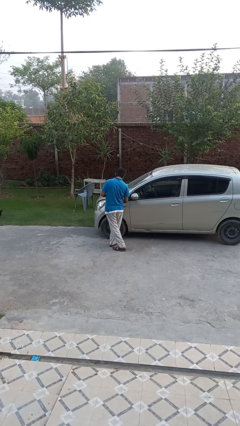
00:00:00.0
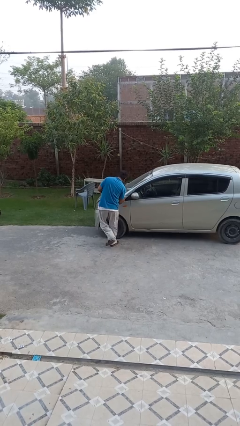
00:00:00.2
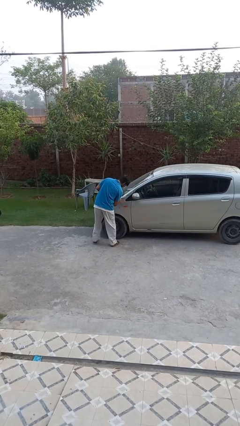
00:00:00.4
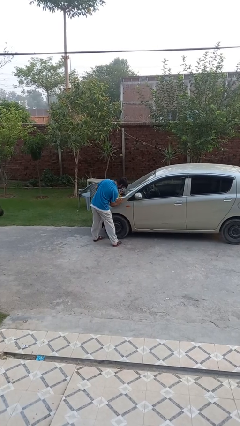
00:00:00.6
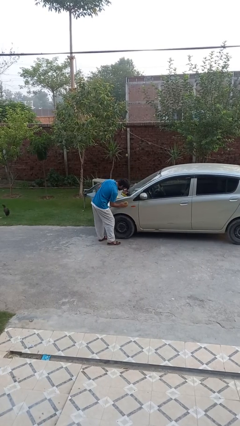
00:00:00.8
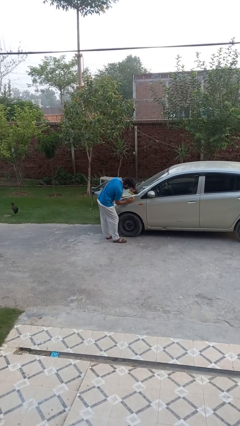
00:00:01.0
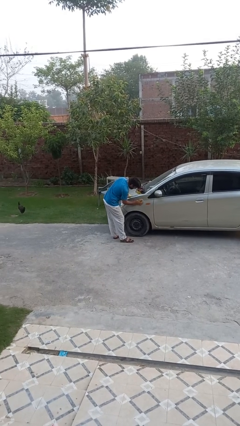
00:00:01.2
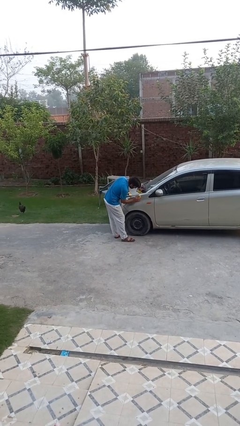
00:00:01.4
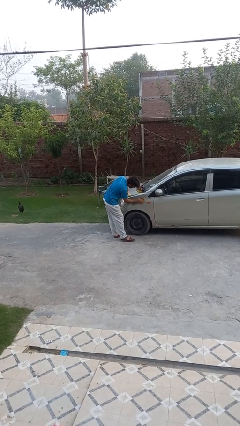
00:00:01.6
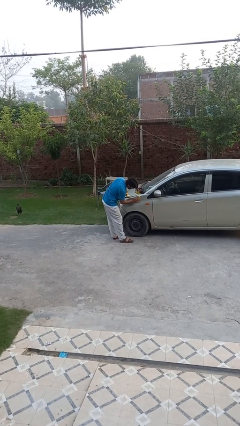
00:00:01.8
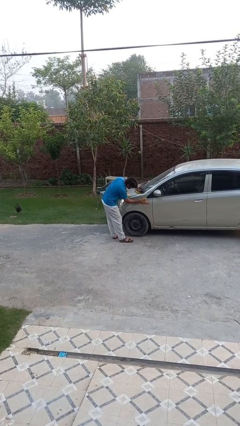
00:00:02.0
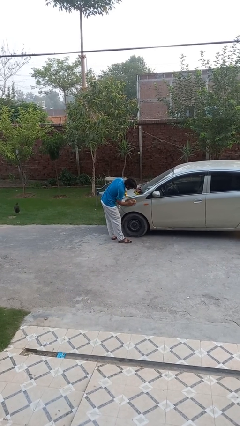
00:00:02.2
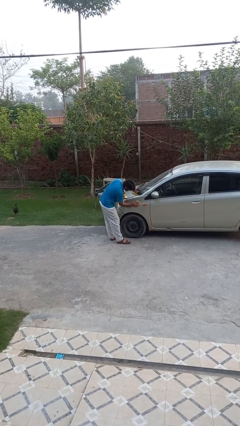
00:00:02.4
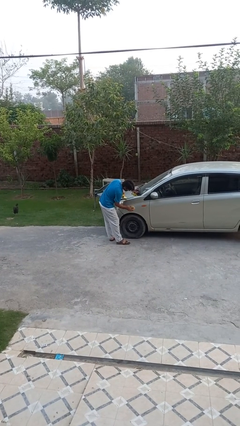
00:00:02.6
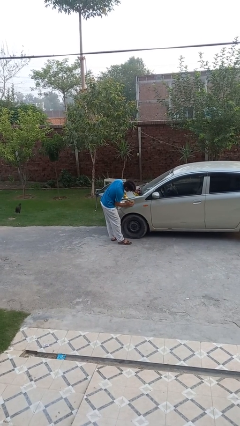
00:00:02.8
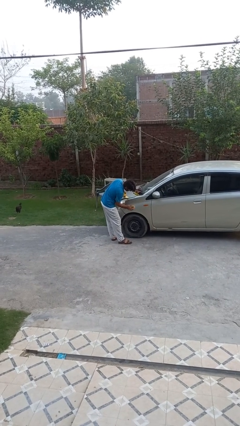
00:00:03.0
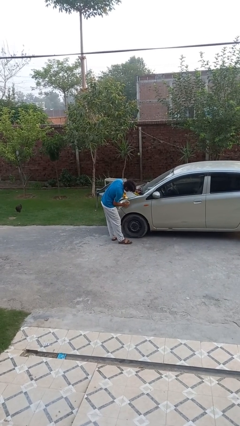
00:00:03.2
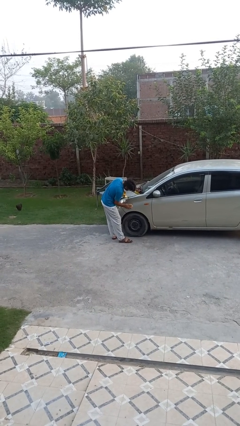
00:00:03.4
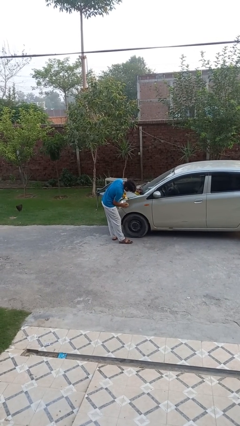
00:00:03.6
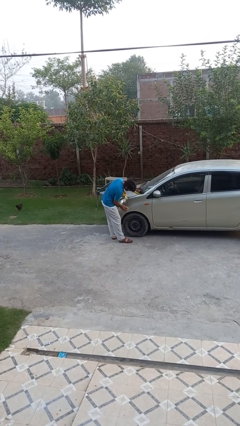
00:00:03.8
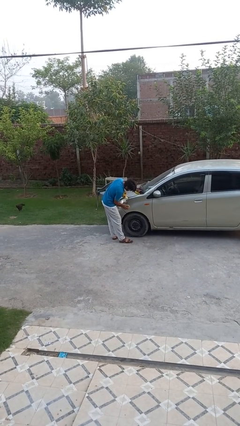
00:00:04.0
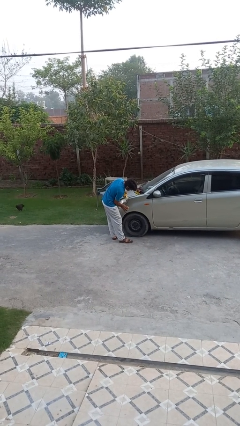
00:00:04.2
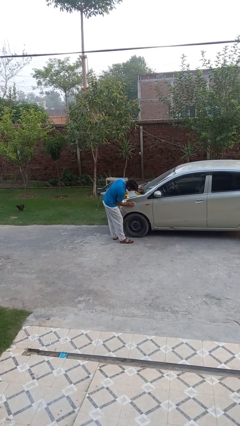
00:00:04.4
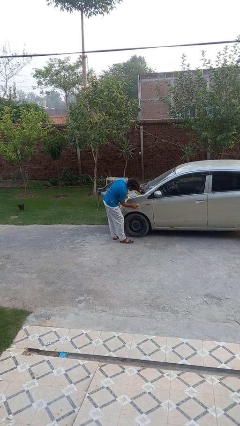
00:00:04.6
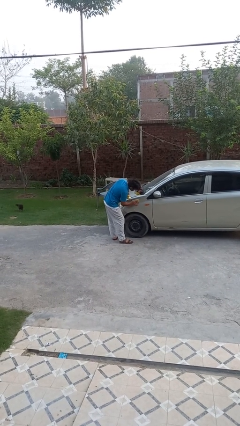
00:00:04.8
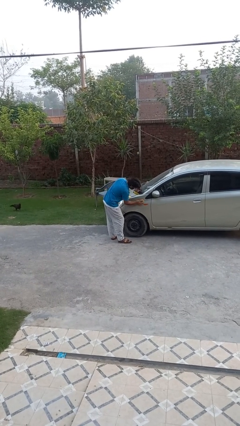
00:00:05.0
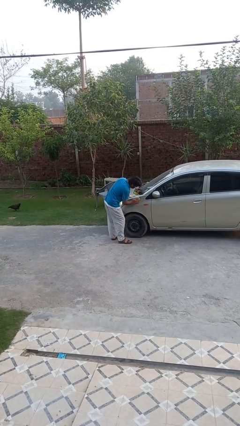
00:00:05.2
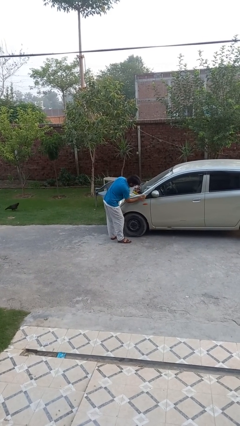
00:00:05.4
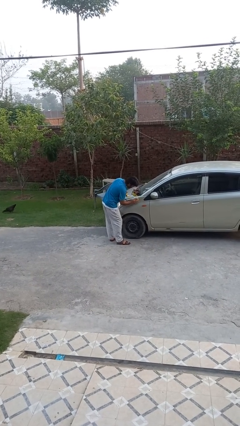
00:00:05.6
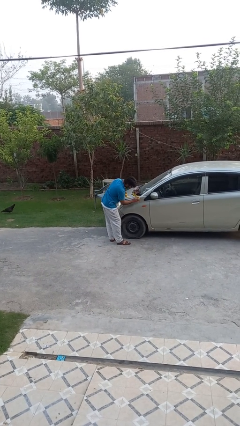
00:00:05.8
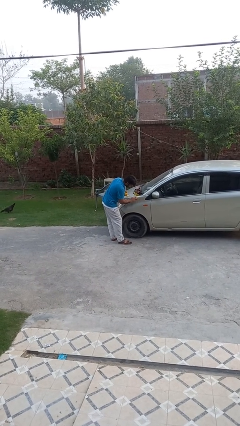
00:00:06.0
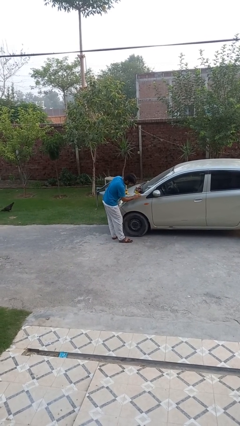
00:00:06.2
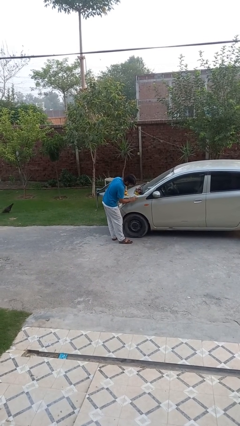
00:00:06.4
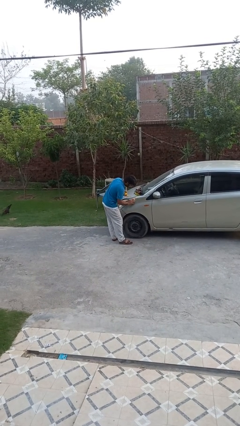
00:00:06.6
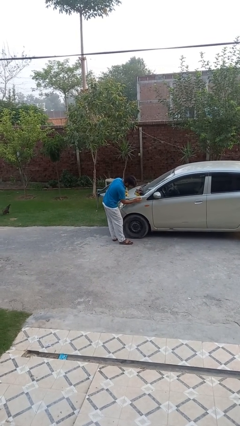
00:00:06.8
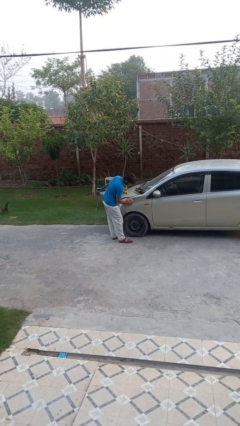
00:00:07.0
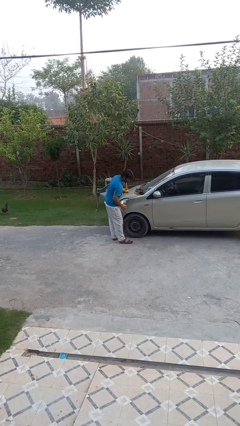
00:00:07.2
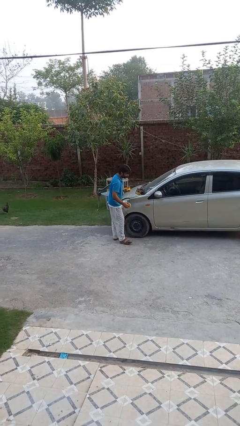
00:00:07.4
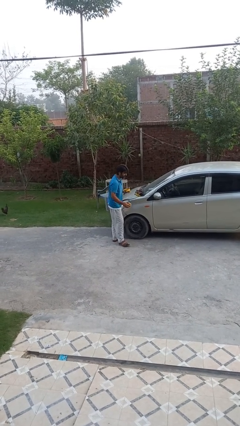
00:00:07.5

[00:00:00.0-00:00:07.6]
person polishes car with rag

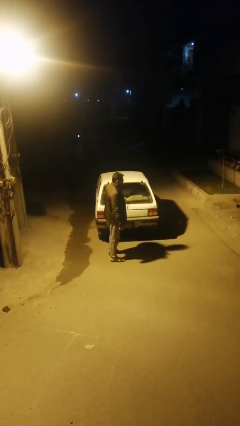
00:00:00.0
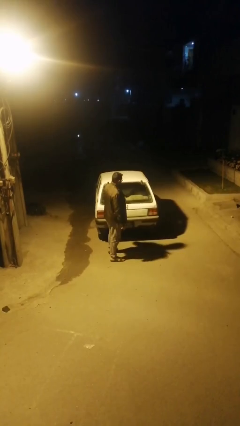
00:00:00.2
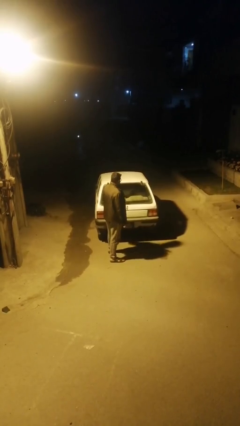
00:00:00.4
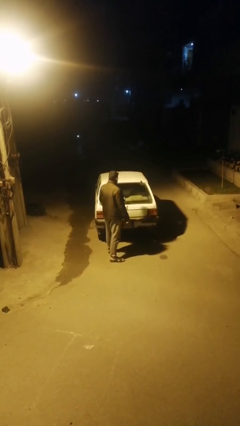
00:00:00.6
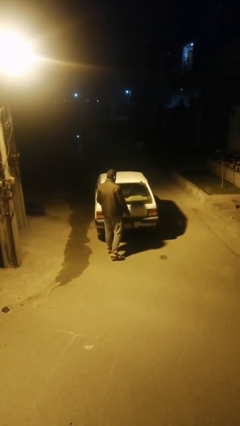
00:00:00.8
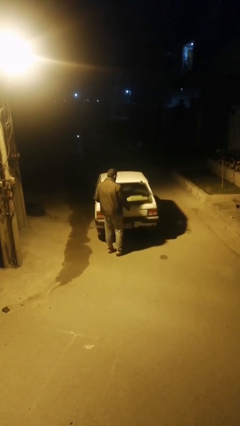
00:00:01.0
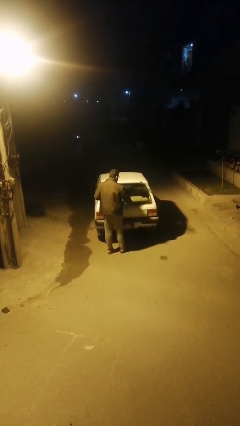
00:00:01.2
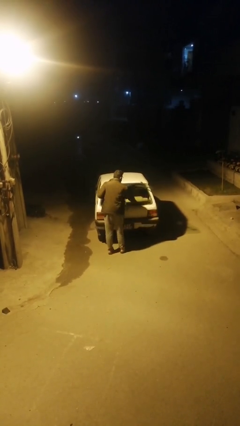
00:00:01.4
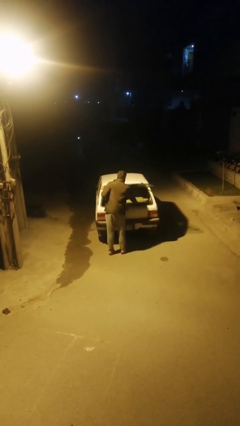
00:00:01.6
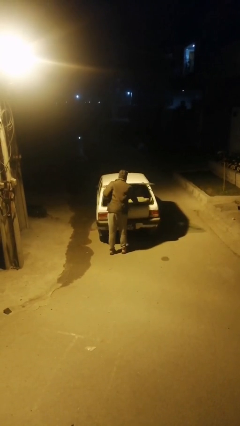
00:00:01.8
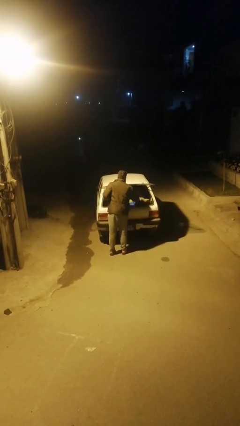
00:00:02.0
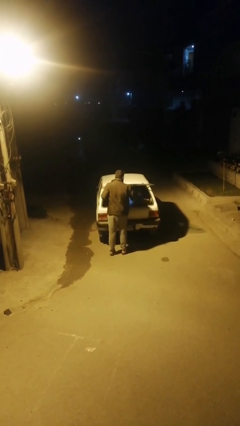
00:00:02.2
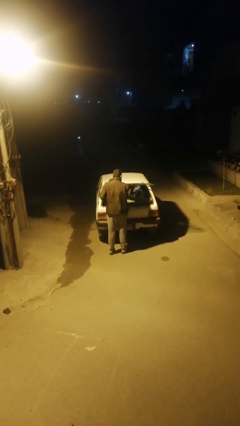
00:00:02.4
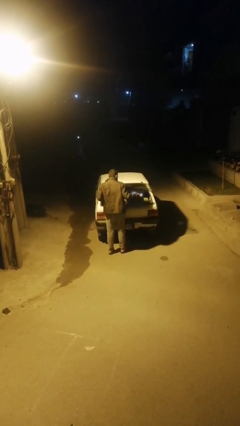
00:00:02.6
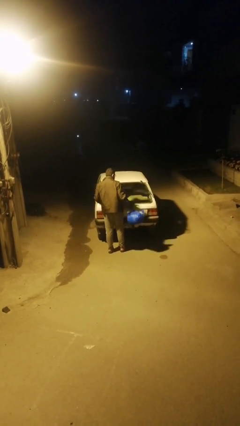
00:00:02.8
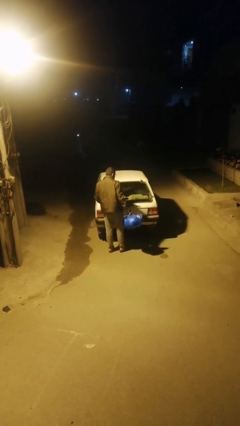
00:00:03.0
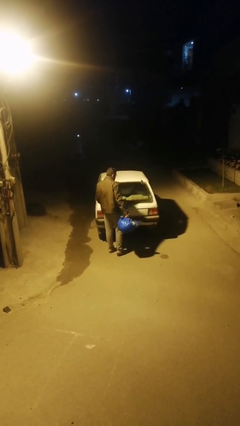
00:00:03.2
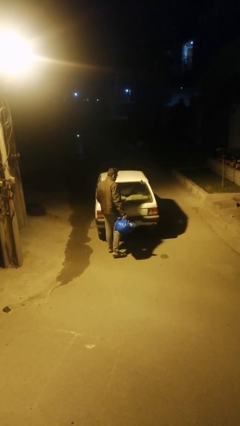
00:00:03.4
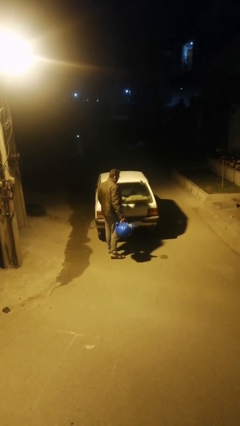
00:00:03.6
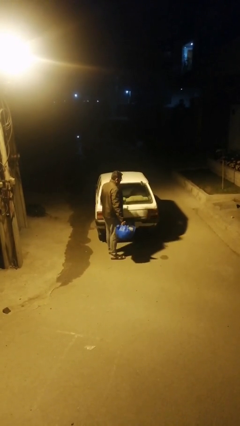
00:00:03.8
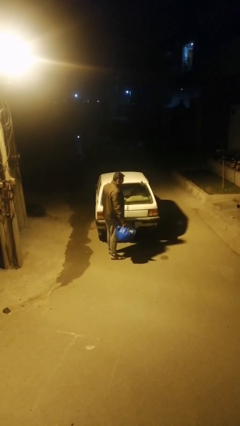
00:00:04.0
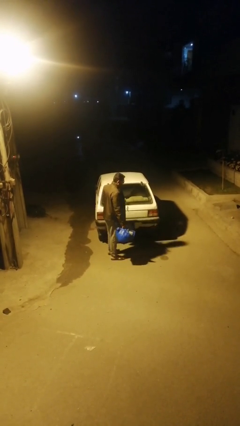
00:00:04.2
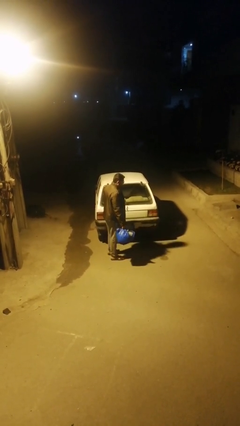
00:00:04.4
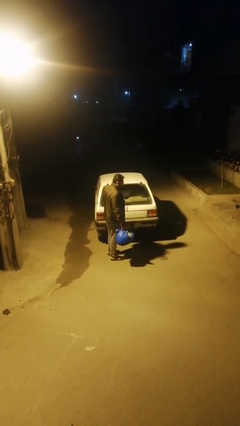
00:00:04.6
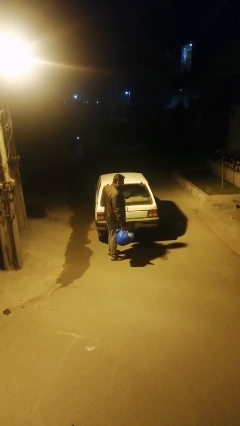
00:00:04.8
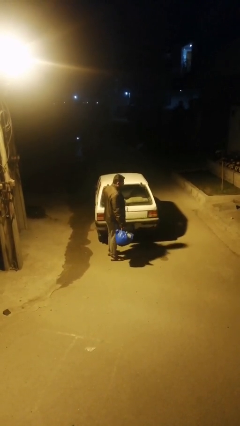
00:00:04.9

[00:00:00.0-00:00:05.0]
person unloads car

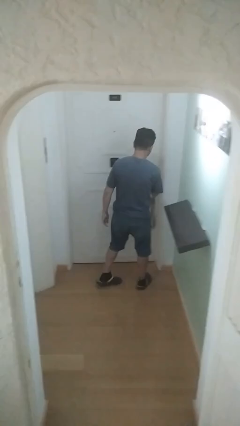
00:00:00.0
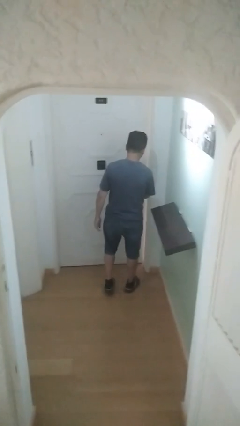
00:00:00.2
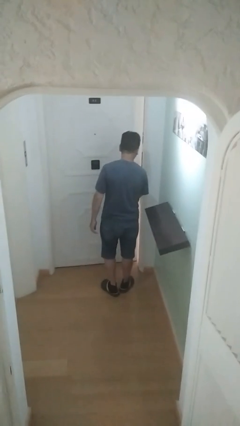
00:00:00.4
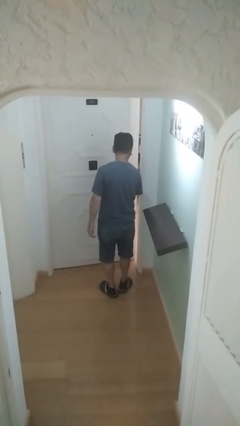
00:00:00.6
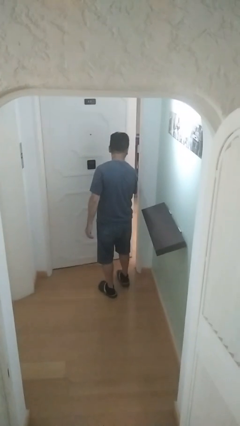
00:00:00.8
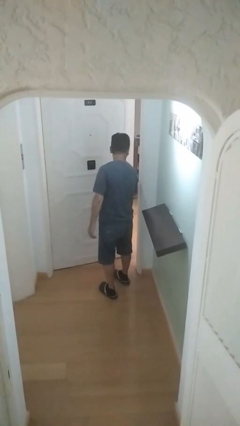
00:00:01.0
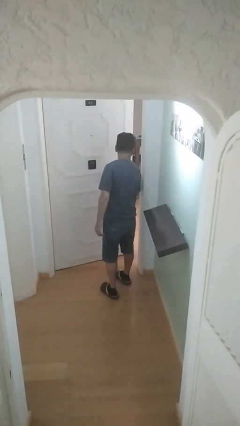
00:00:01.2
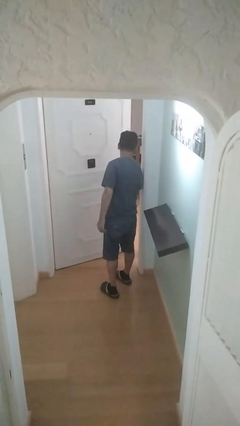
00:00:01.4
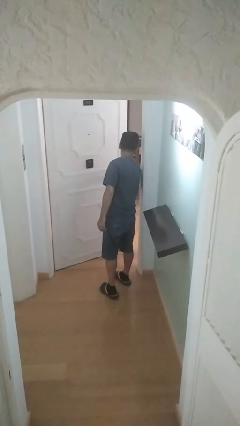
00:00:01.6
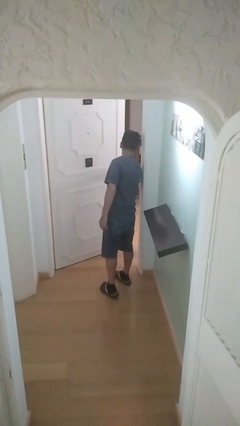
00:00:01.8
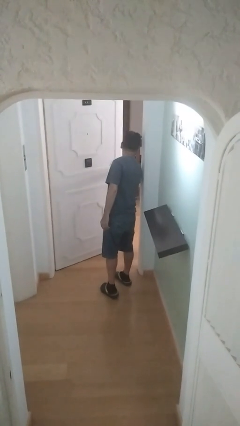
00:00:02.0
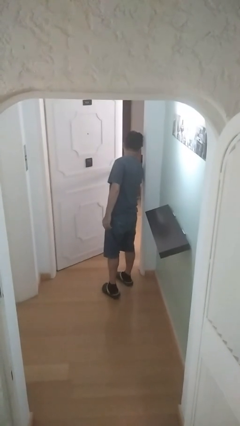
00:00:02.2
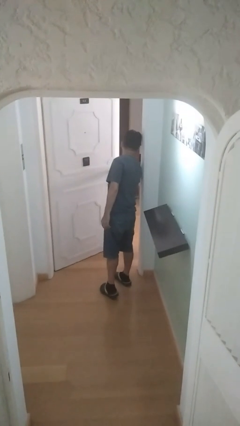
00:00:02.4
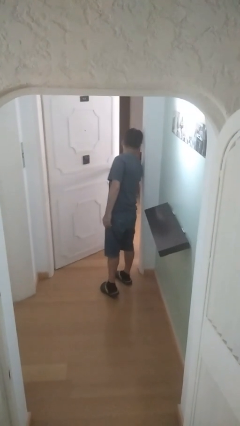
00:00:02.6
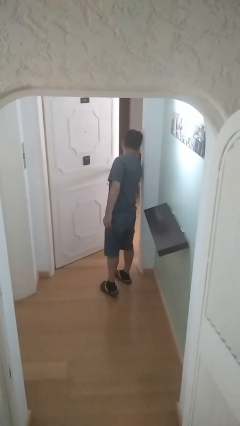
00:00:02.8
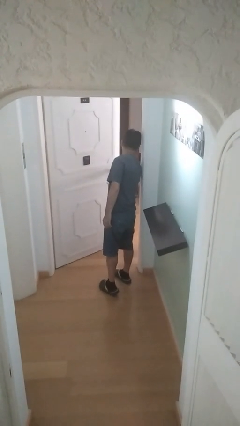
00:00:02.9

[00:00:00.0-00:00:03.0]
person opens facility door

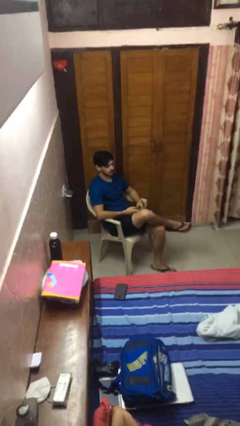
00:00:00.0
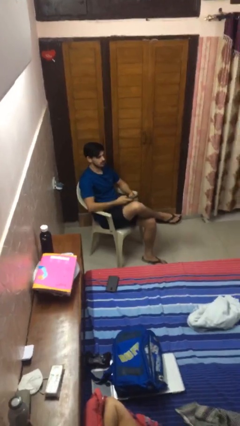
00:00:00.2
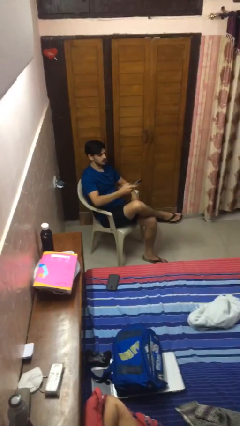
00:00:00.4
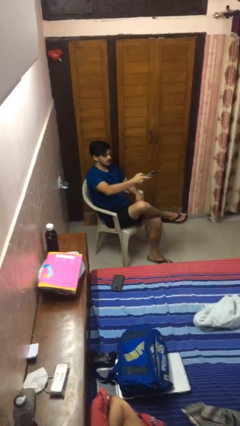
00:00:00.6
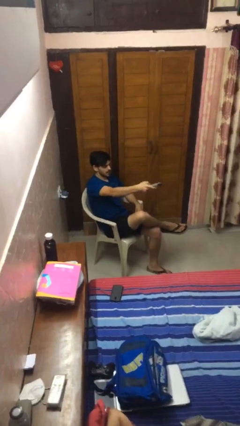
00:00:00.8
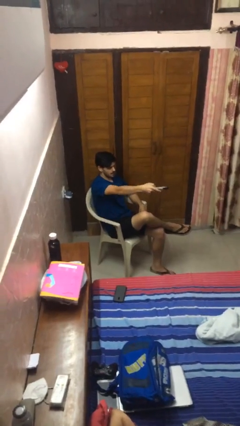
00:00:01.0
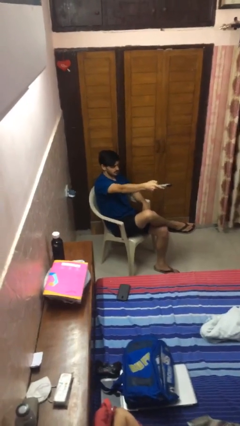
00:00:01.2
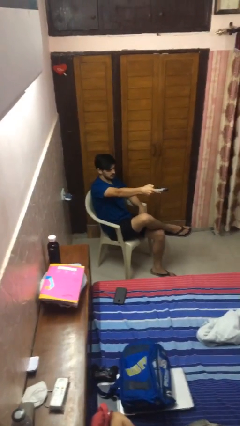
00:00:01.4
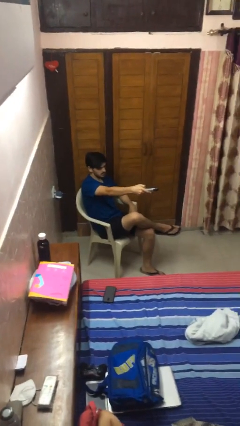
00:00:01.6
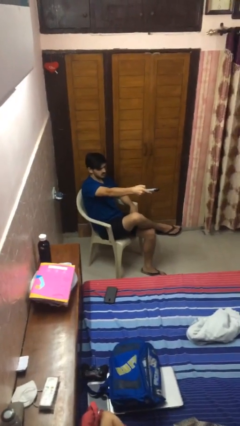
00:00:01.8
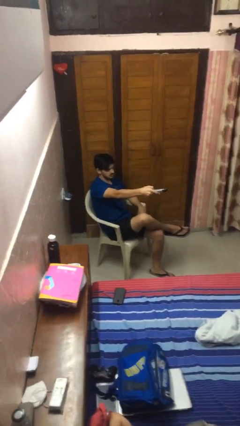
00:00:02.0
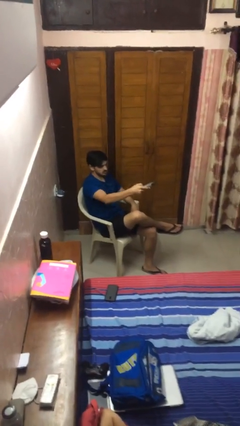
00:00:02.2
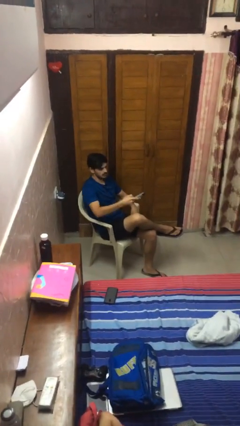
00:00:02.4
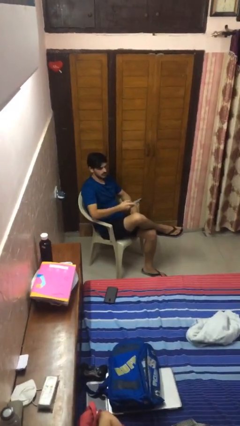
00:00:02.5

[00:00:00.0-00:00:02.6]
person uses television remote

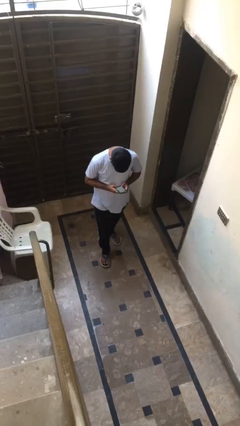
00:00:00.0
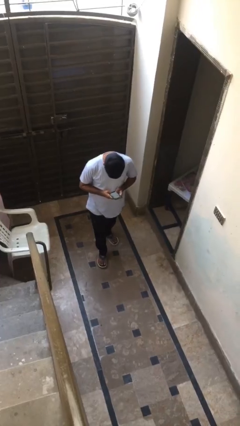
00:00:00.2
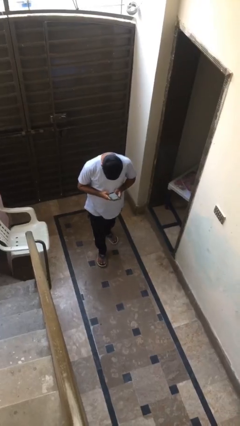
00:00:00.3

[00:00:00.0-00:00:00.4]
person talks on phone
